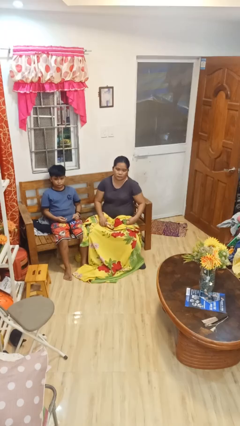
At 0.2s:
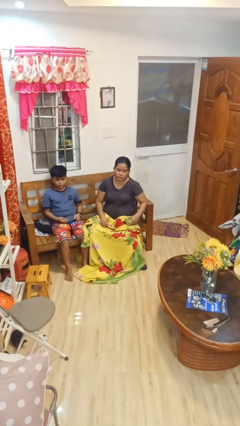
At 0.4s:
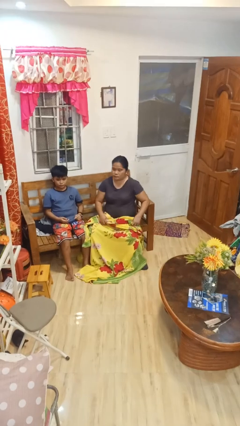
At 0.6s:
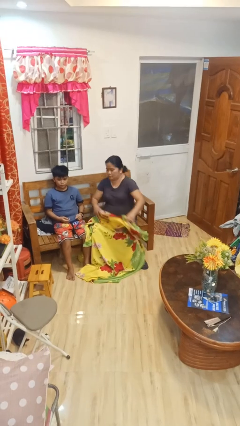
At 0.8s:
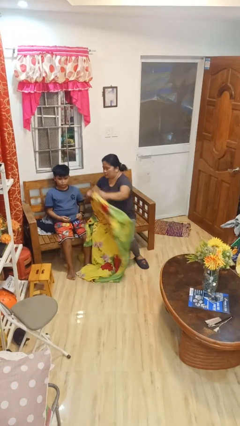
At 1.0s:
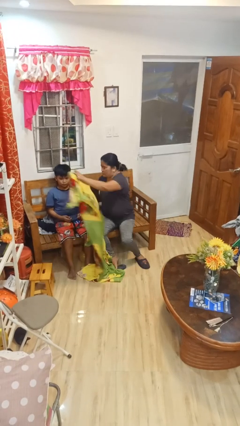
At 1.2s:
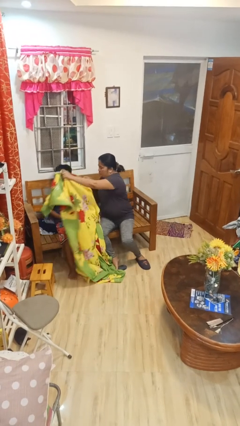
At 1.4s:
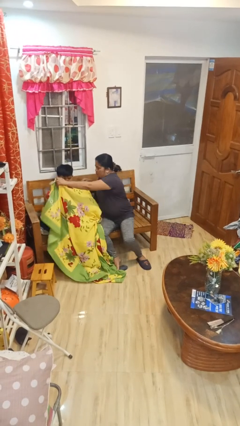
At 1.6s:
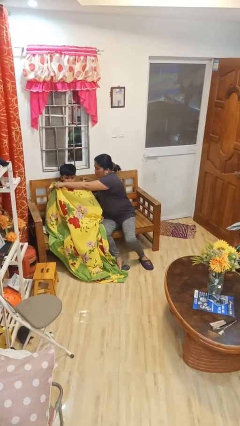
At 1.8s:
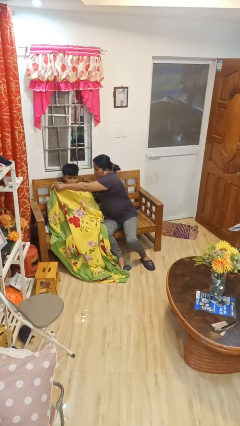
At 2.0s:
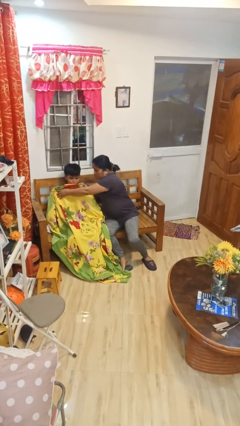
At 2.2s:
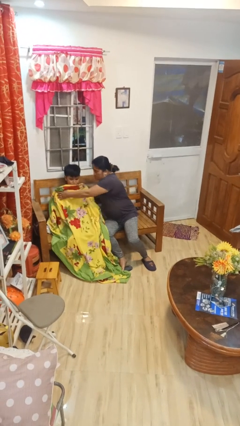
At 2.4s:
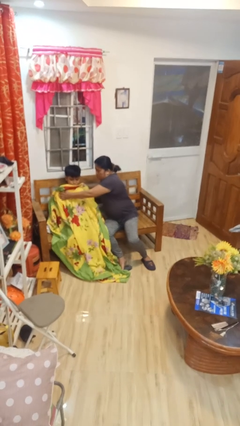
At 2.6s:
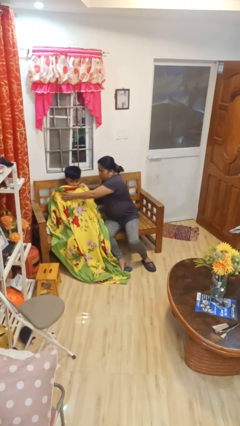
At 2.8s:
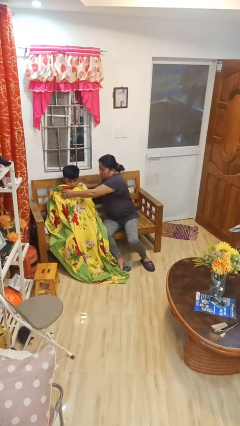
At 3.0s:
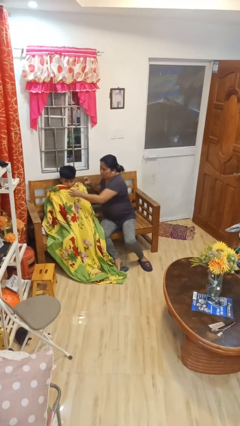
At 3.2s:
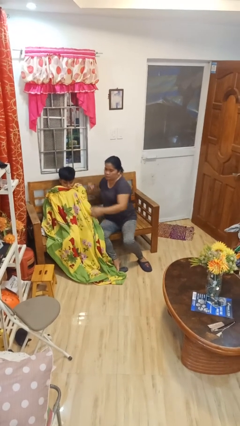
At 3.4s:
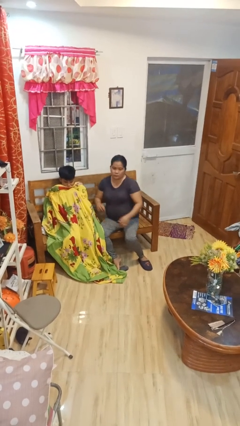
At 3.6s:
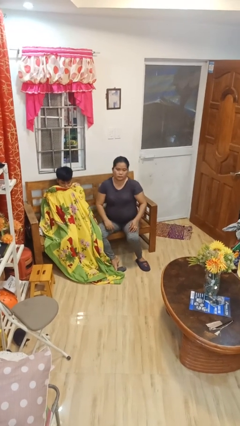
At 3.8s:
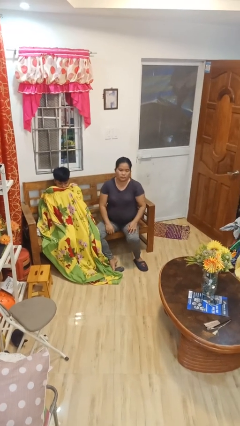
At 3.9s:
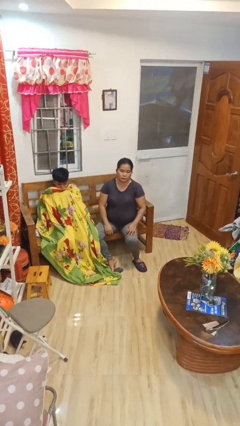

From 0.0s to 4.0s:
person covers friend with blanket

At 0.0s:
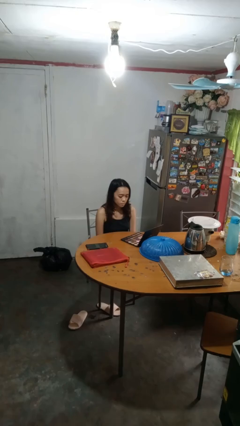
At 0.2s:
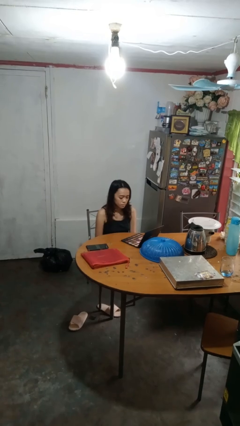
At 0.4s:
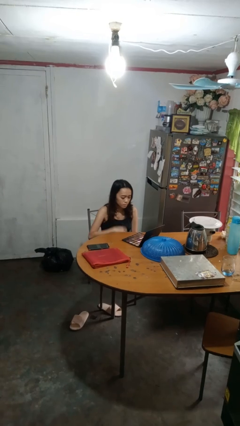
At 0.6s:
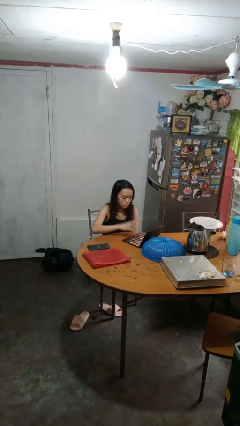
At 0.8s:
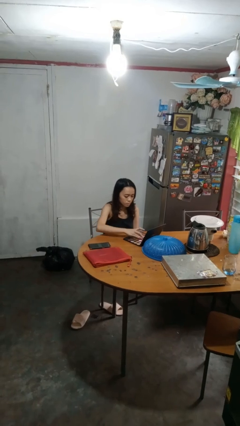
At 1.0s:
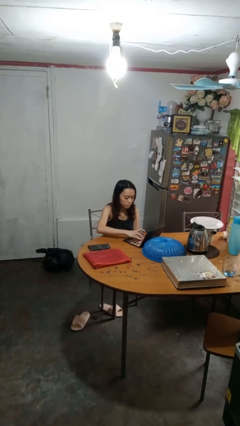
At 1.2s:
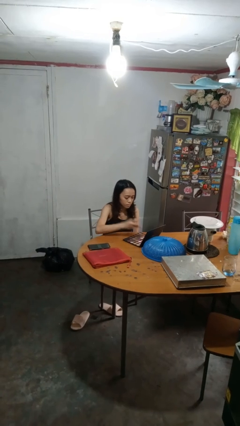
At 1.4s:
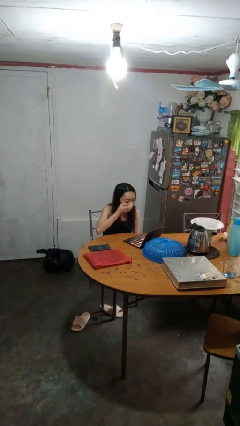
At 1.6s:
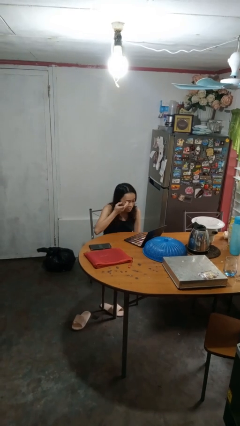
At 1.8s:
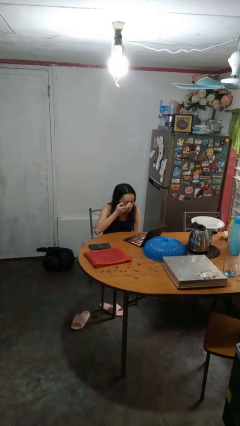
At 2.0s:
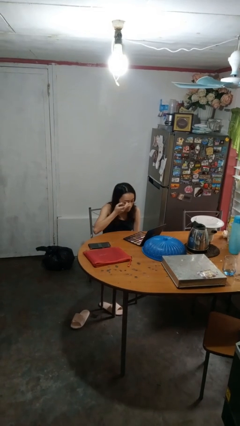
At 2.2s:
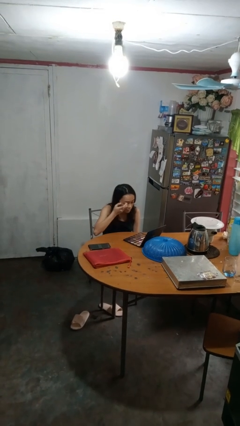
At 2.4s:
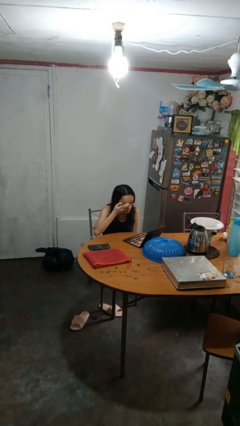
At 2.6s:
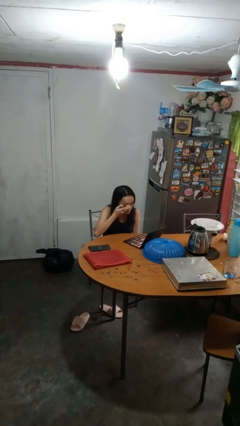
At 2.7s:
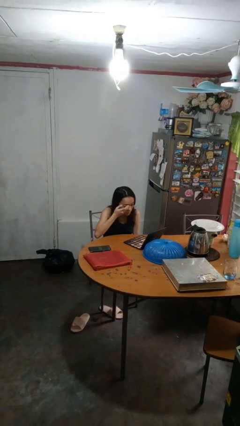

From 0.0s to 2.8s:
person applies eye makeup

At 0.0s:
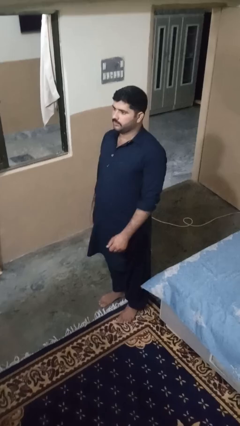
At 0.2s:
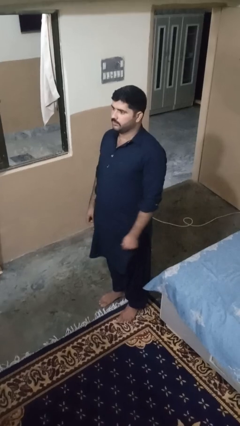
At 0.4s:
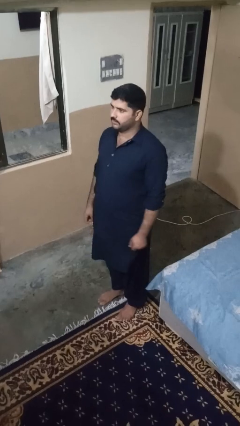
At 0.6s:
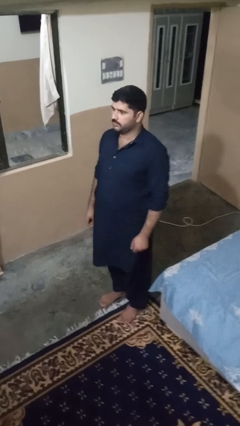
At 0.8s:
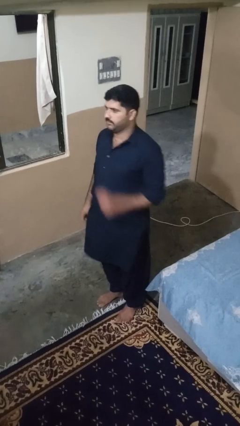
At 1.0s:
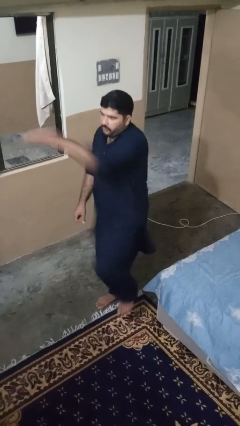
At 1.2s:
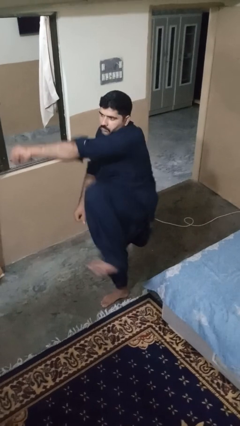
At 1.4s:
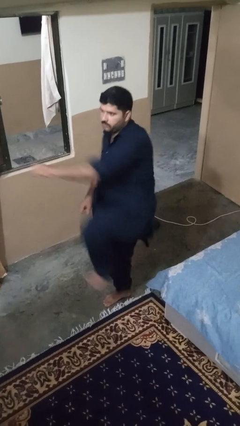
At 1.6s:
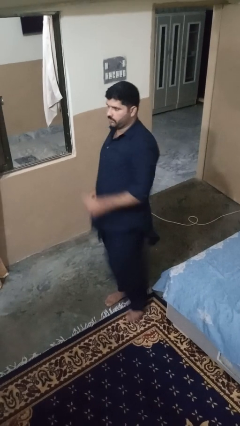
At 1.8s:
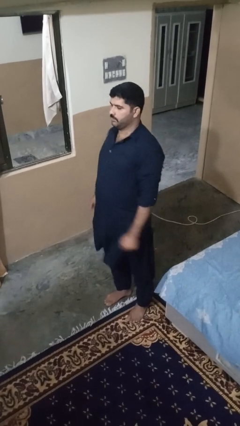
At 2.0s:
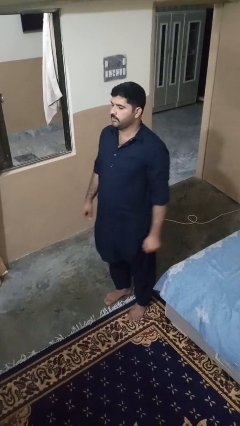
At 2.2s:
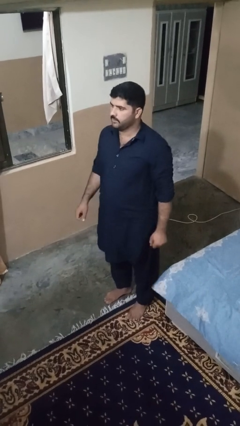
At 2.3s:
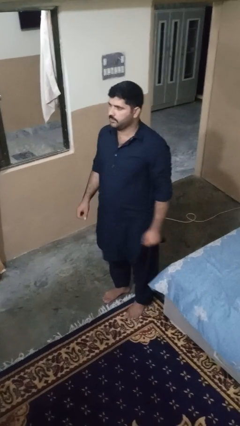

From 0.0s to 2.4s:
person karate kicks

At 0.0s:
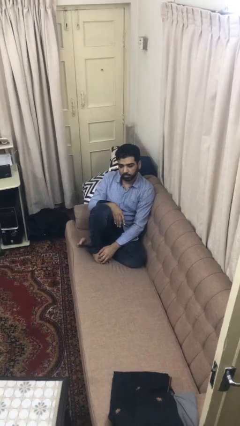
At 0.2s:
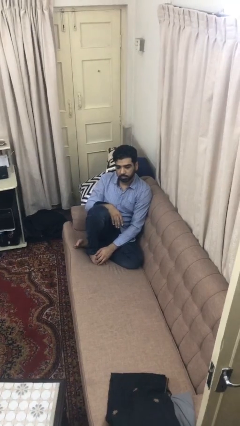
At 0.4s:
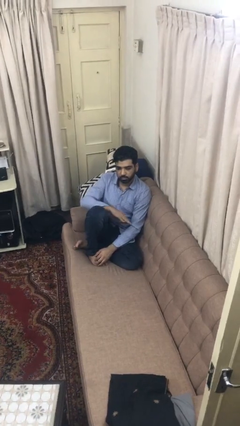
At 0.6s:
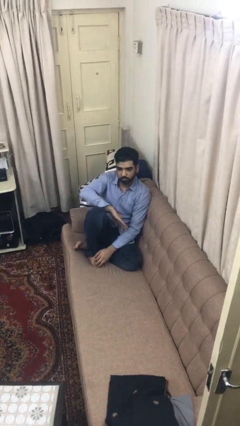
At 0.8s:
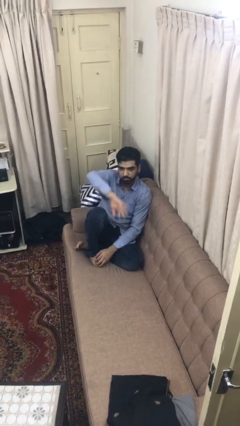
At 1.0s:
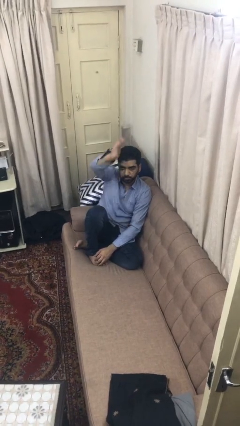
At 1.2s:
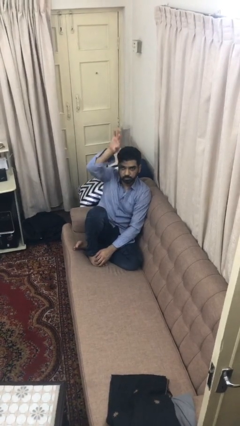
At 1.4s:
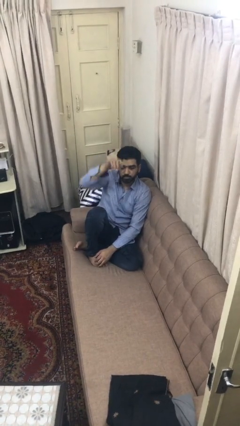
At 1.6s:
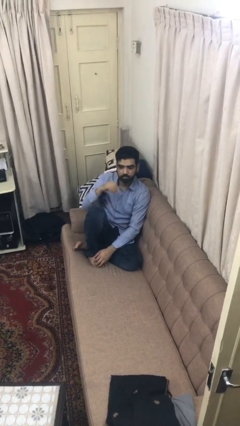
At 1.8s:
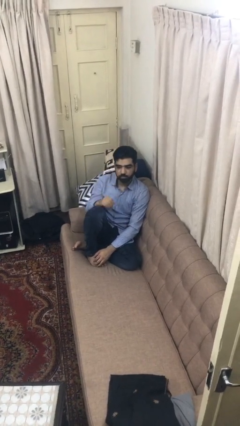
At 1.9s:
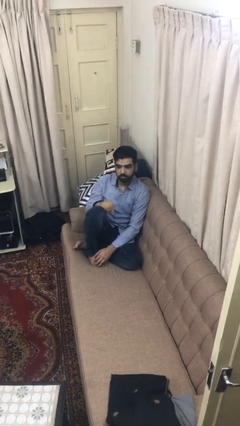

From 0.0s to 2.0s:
person gestures swipe up

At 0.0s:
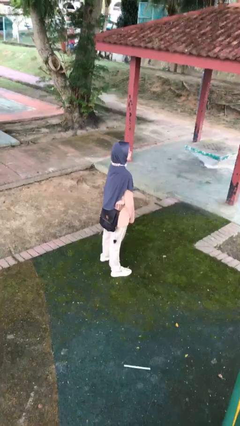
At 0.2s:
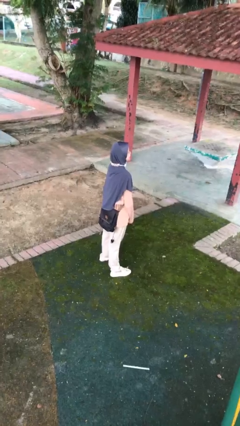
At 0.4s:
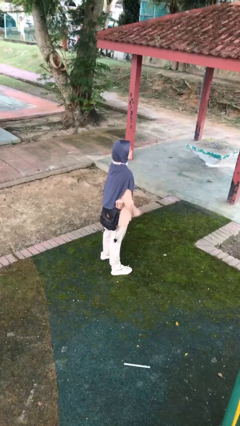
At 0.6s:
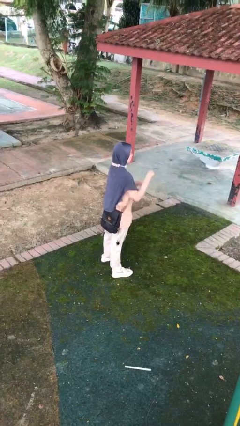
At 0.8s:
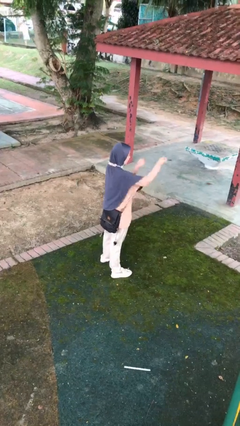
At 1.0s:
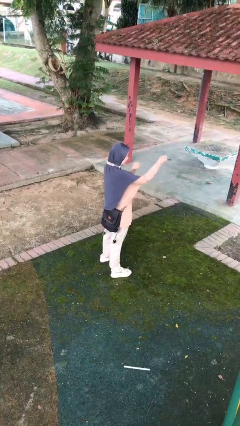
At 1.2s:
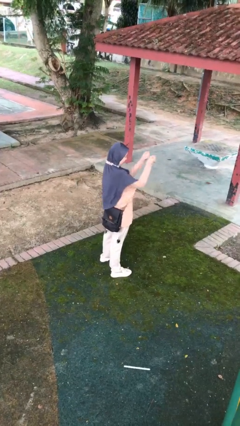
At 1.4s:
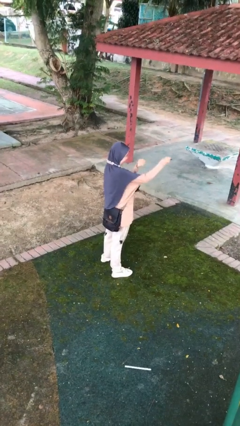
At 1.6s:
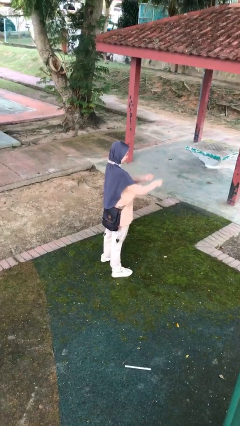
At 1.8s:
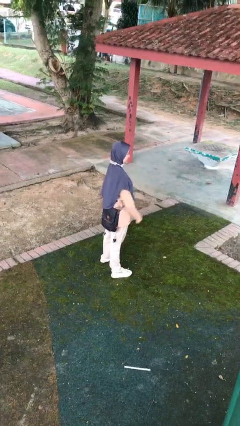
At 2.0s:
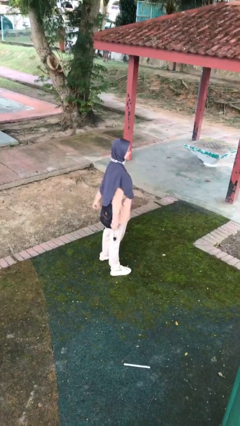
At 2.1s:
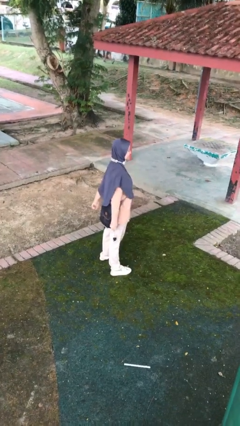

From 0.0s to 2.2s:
person punches

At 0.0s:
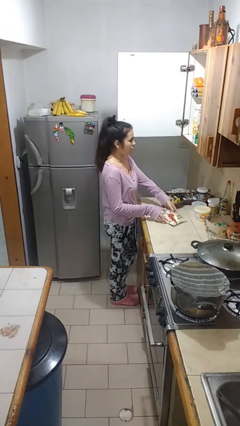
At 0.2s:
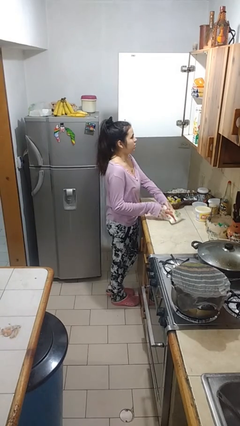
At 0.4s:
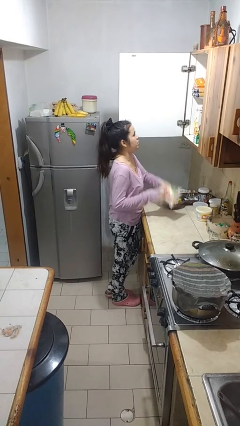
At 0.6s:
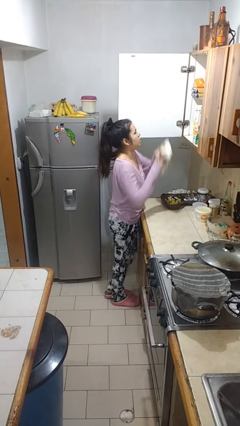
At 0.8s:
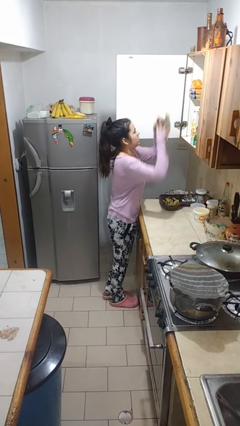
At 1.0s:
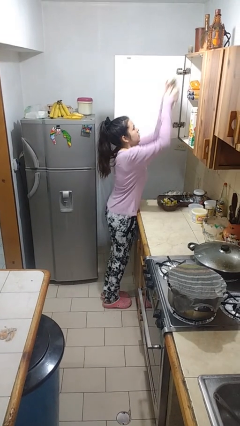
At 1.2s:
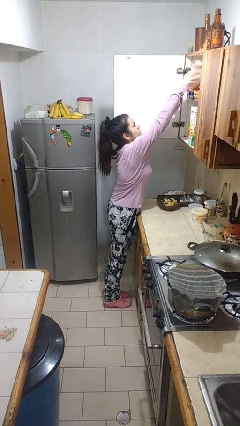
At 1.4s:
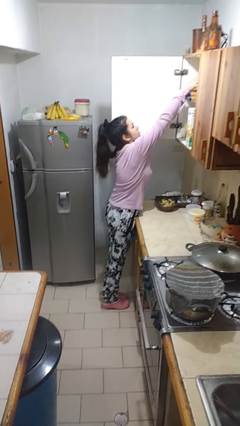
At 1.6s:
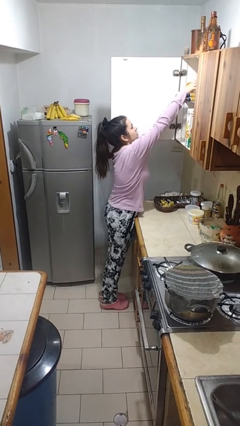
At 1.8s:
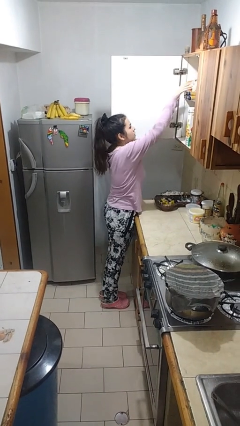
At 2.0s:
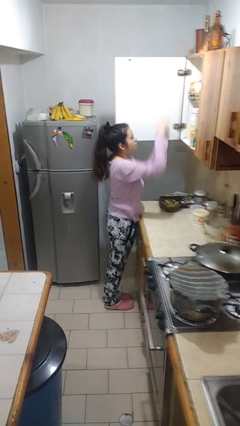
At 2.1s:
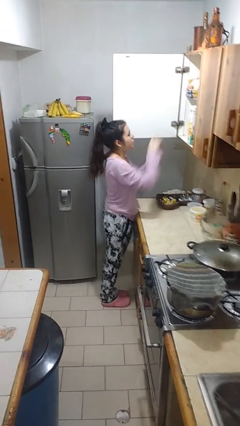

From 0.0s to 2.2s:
person puts object in cabinet

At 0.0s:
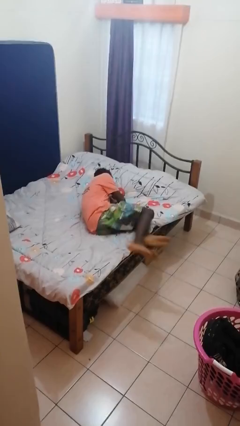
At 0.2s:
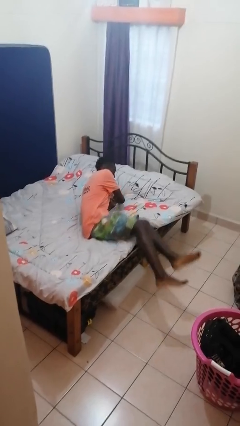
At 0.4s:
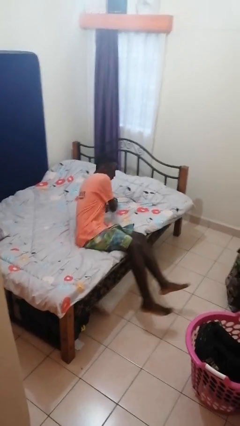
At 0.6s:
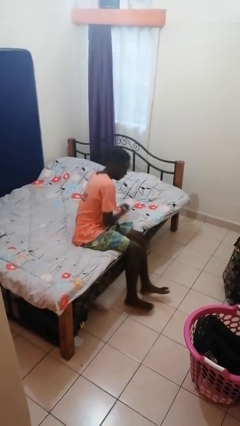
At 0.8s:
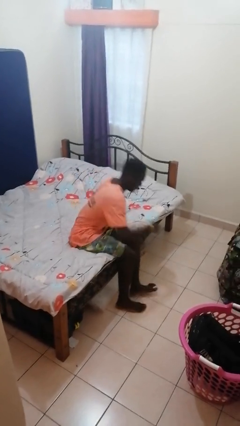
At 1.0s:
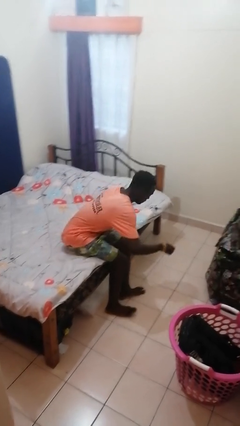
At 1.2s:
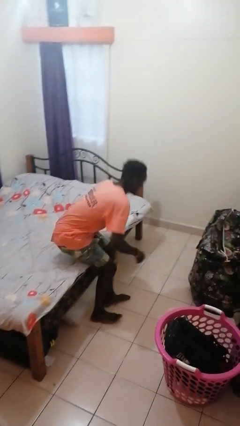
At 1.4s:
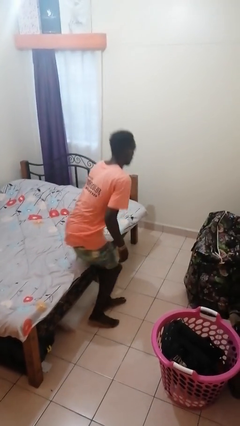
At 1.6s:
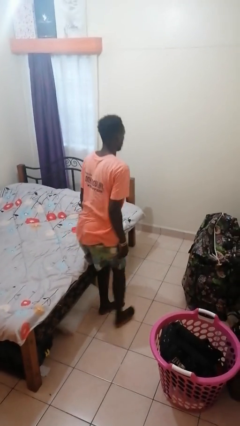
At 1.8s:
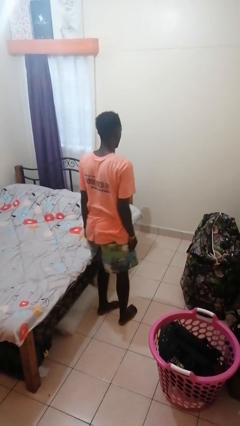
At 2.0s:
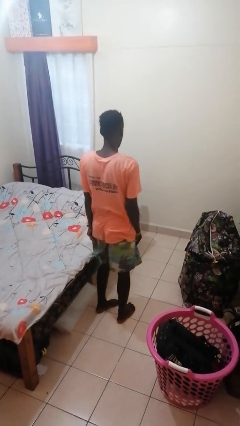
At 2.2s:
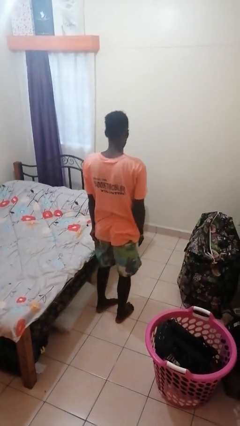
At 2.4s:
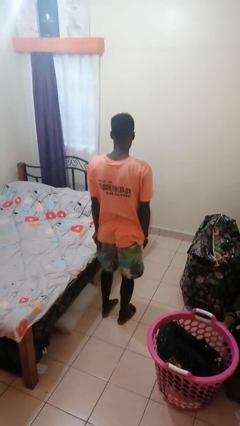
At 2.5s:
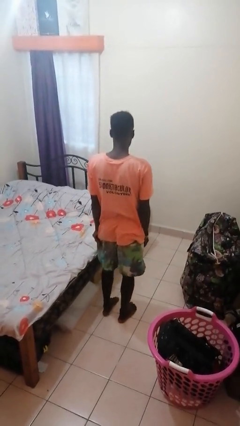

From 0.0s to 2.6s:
person stands up
